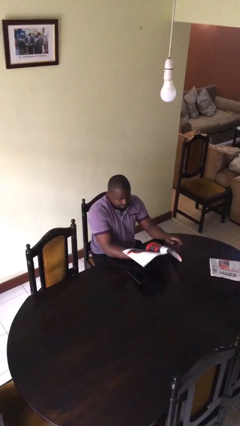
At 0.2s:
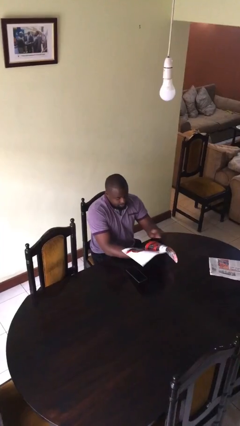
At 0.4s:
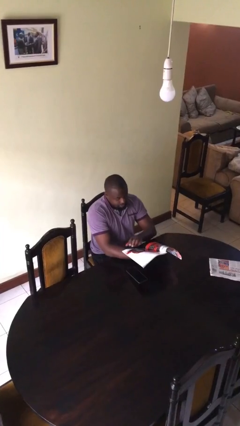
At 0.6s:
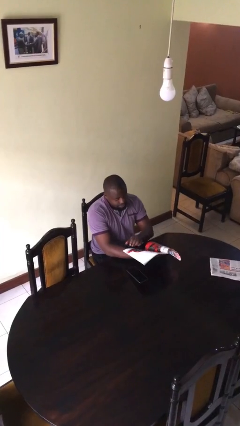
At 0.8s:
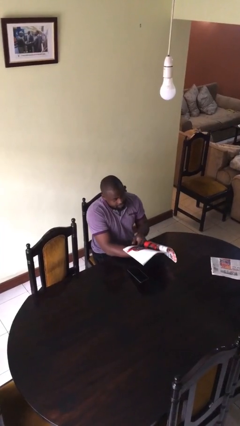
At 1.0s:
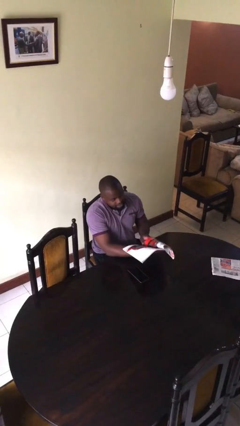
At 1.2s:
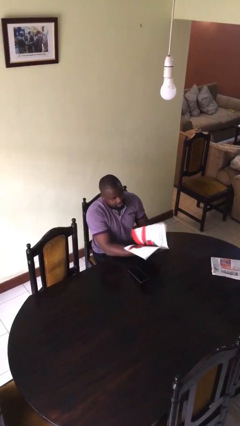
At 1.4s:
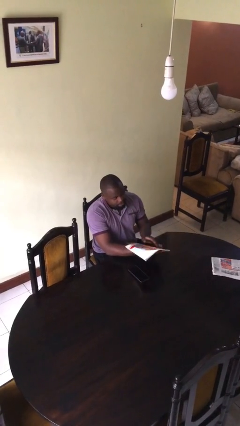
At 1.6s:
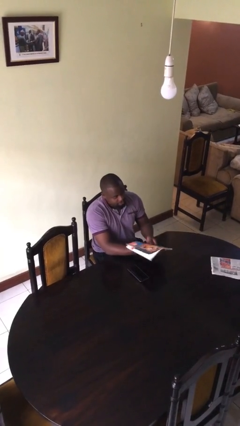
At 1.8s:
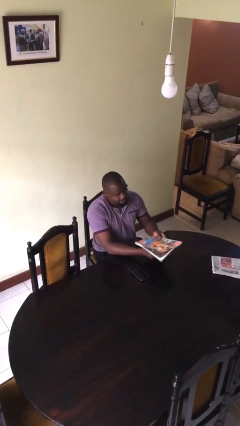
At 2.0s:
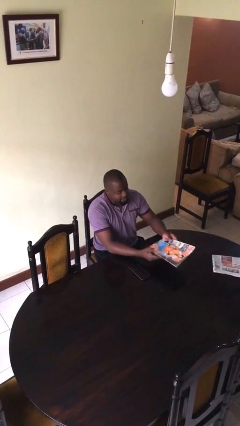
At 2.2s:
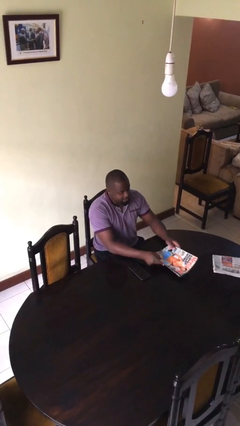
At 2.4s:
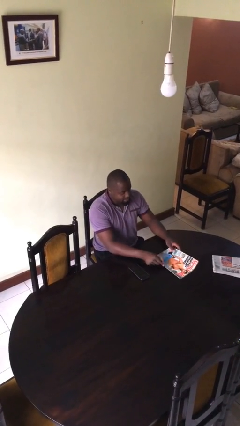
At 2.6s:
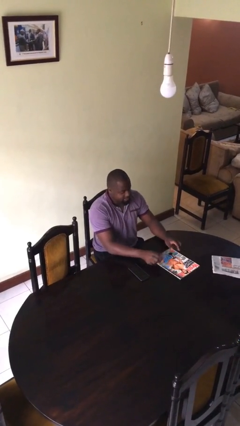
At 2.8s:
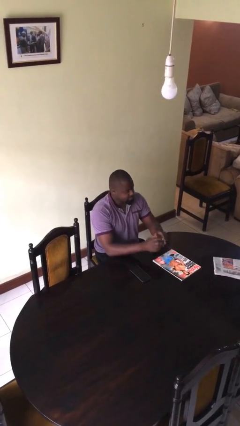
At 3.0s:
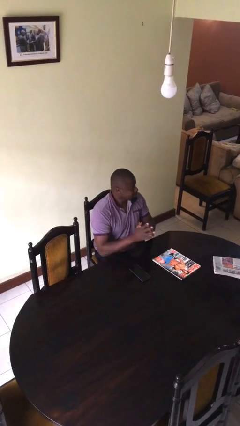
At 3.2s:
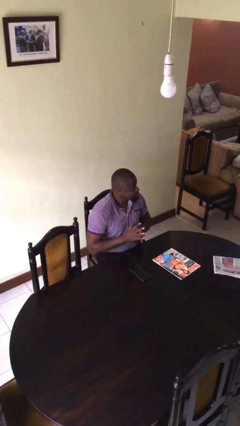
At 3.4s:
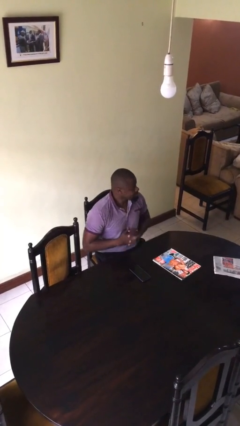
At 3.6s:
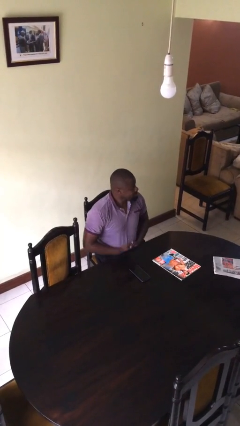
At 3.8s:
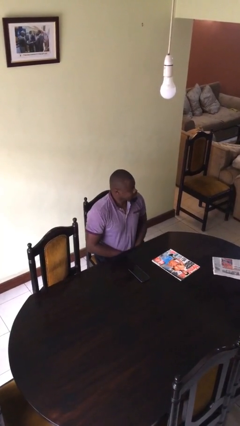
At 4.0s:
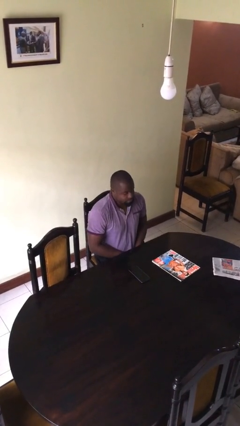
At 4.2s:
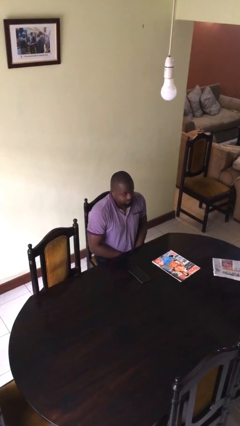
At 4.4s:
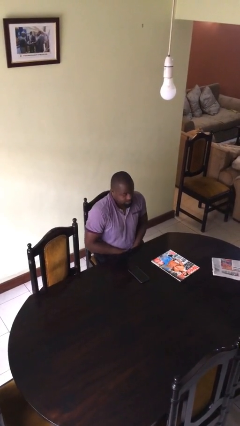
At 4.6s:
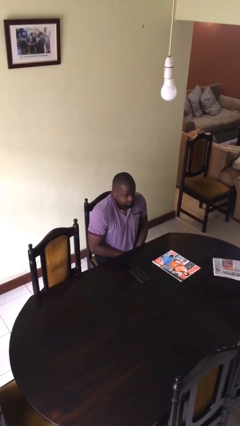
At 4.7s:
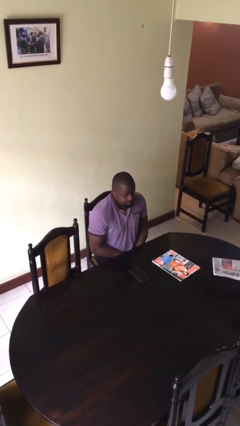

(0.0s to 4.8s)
person puts down object on table

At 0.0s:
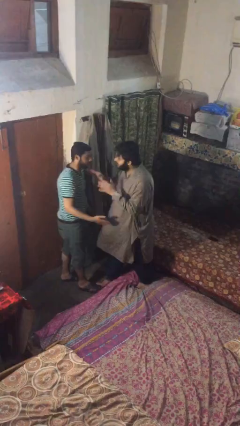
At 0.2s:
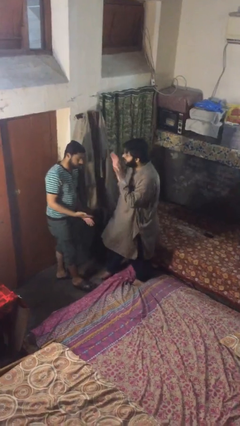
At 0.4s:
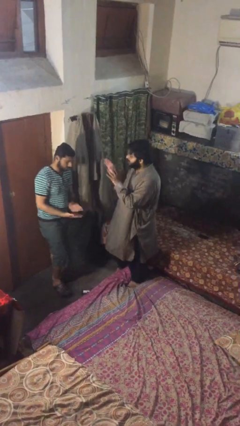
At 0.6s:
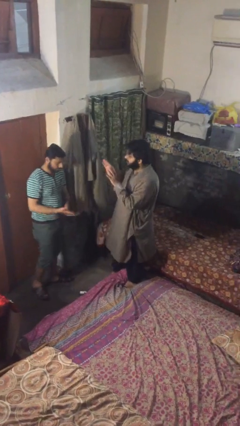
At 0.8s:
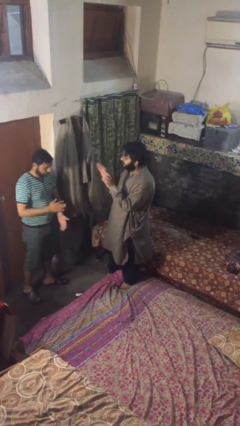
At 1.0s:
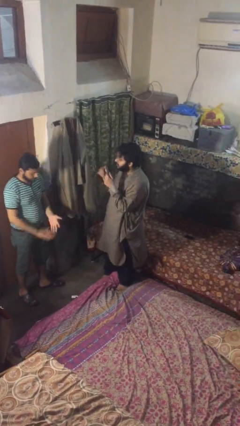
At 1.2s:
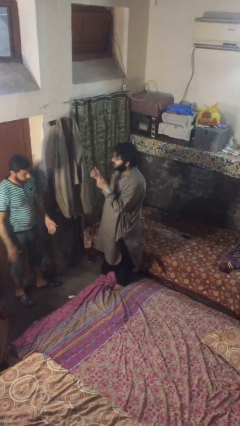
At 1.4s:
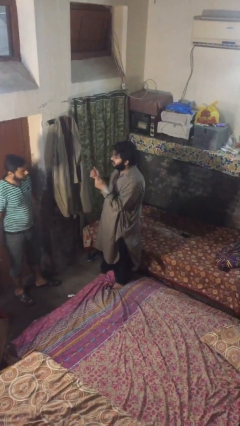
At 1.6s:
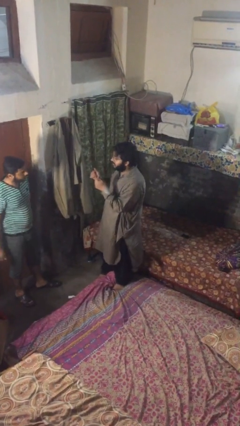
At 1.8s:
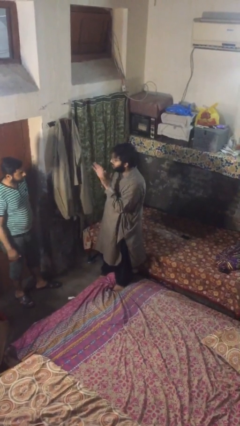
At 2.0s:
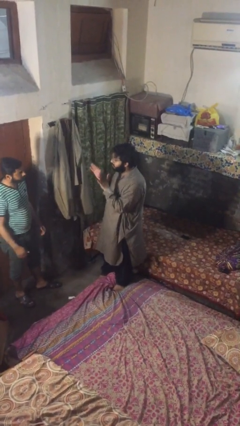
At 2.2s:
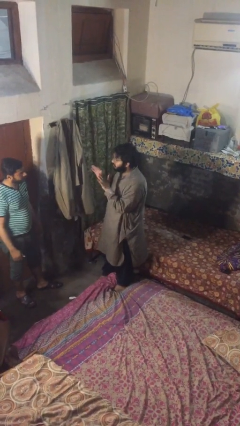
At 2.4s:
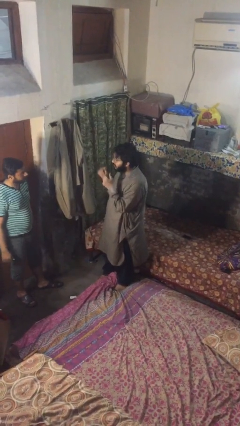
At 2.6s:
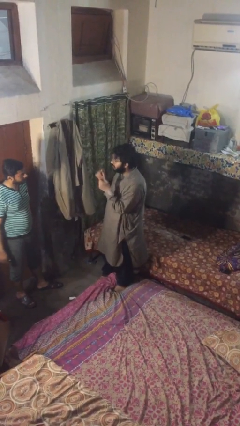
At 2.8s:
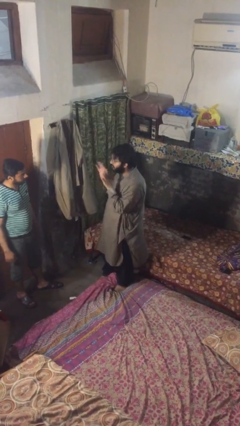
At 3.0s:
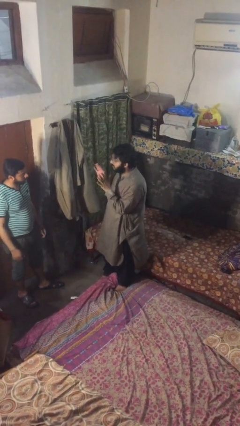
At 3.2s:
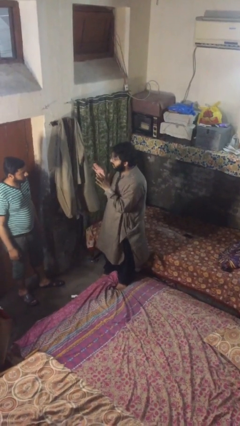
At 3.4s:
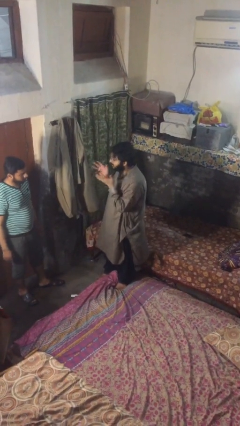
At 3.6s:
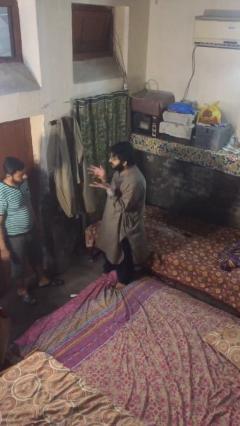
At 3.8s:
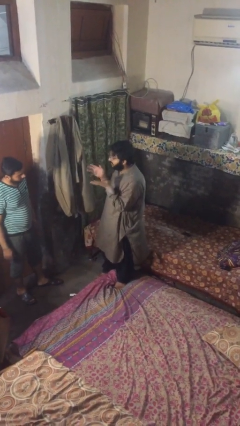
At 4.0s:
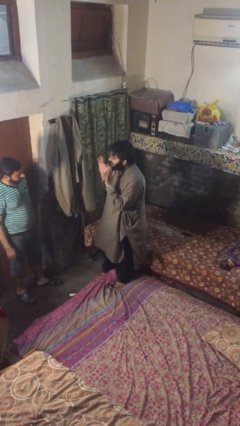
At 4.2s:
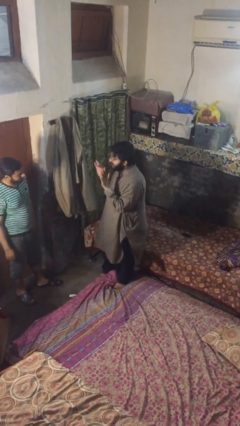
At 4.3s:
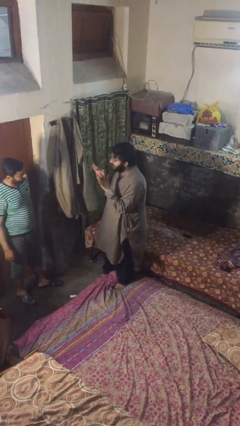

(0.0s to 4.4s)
person talks to person

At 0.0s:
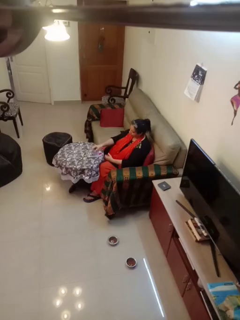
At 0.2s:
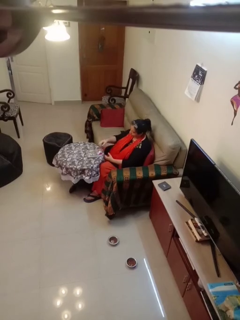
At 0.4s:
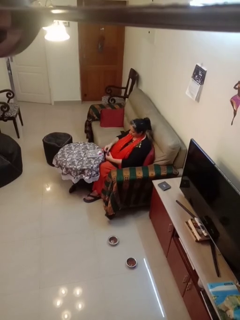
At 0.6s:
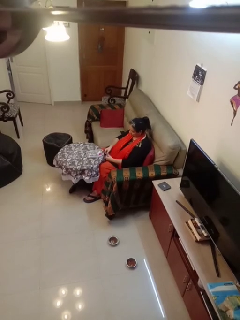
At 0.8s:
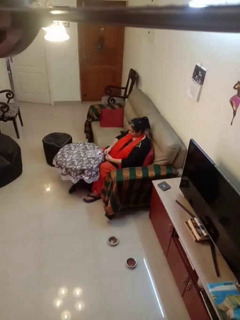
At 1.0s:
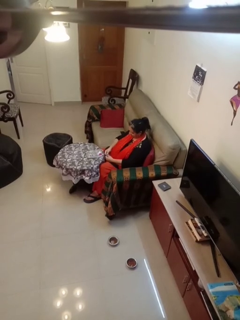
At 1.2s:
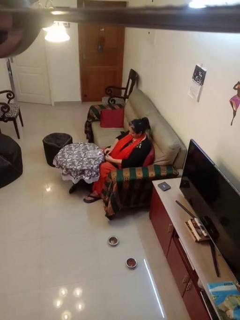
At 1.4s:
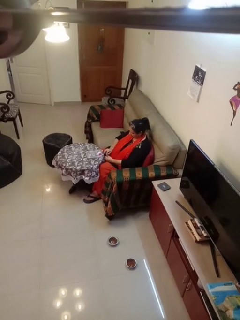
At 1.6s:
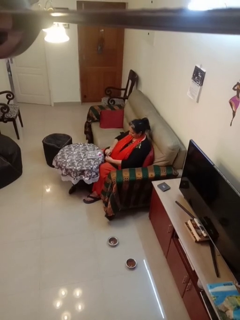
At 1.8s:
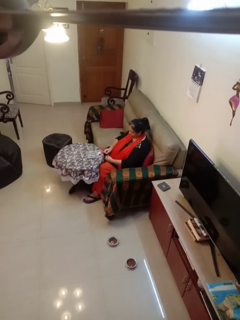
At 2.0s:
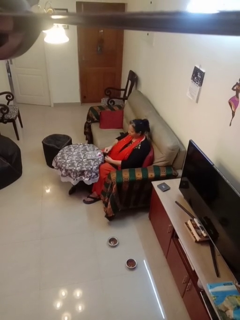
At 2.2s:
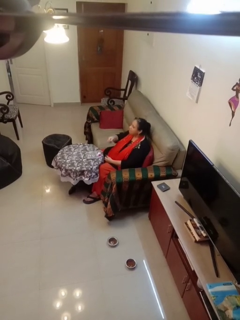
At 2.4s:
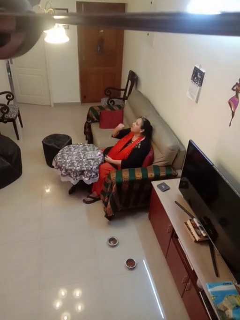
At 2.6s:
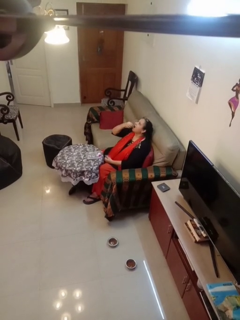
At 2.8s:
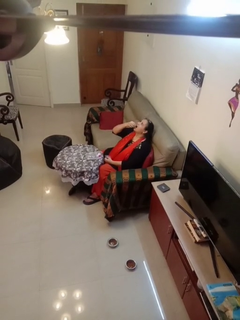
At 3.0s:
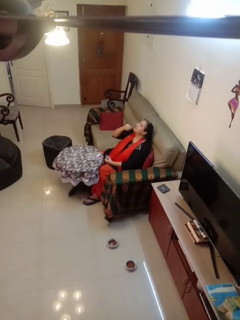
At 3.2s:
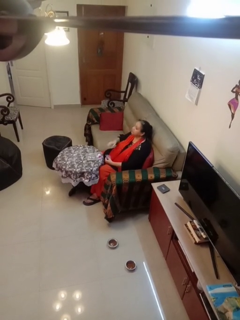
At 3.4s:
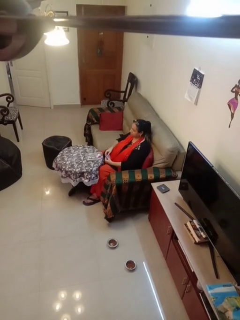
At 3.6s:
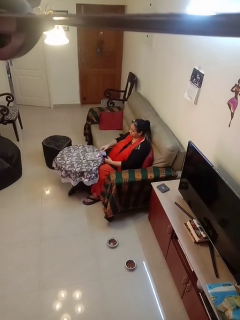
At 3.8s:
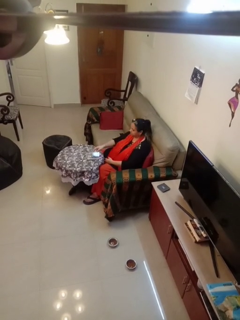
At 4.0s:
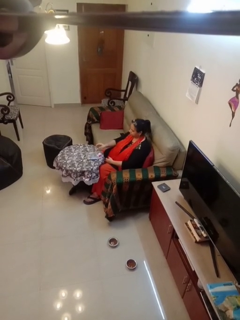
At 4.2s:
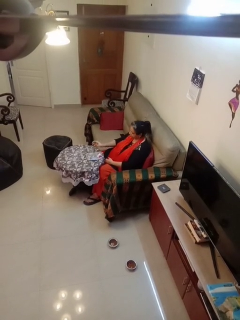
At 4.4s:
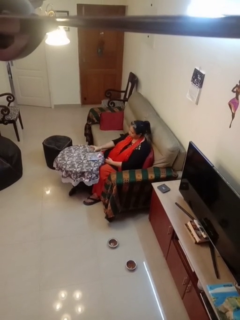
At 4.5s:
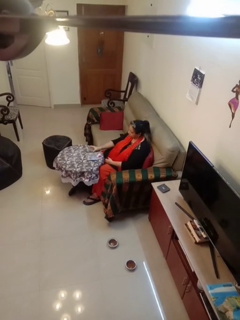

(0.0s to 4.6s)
person takes medicine pills

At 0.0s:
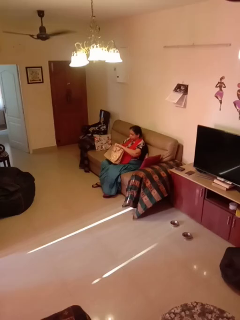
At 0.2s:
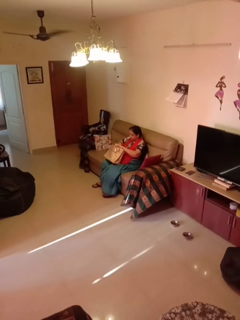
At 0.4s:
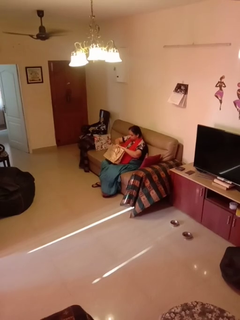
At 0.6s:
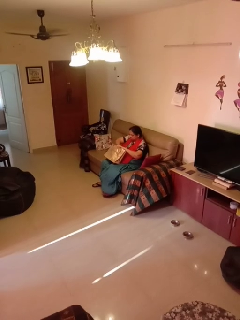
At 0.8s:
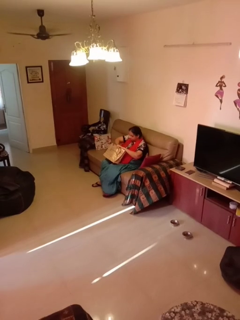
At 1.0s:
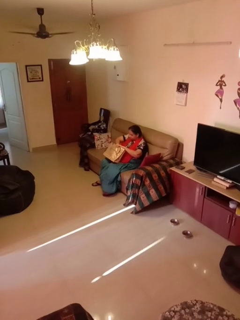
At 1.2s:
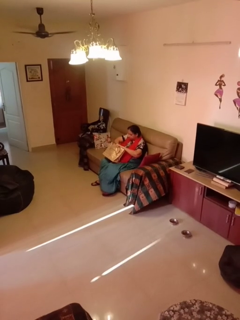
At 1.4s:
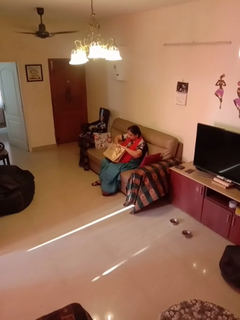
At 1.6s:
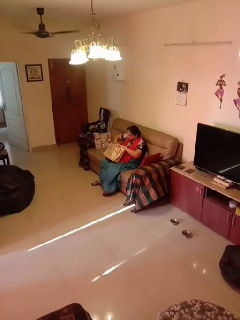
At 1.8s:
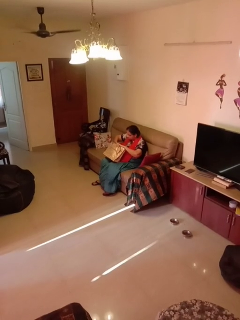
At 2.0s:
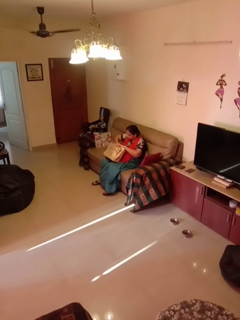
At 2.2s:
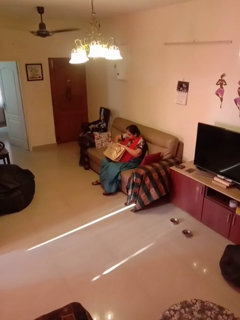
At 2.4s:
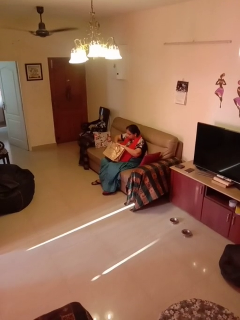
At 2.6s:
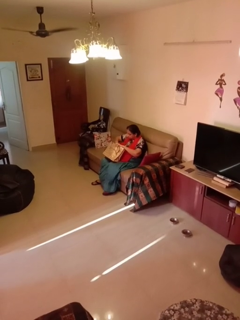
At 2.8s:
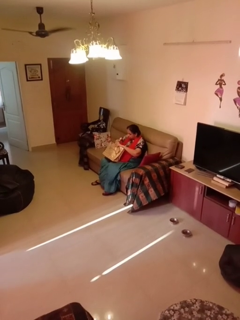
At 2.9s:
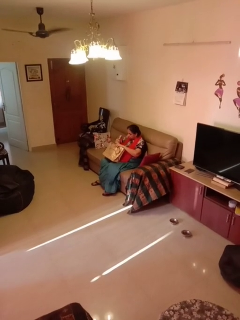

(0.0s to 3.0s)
person searches in purse

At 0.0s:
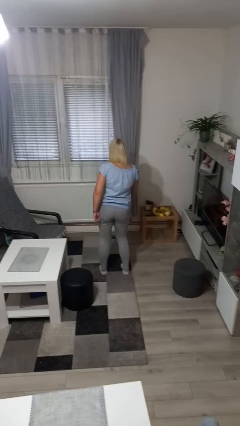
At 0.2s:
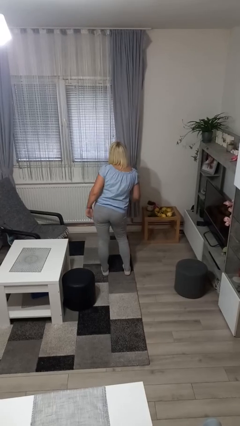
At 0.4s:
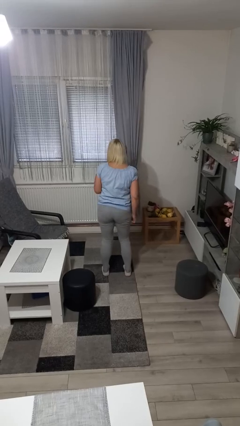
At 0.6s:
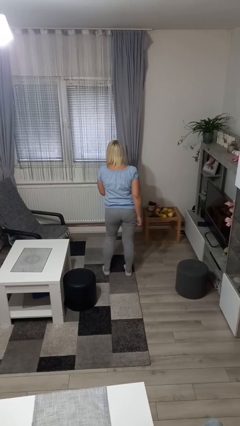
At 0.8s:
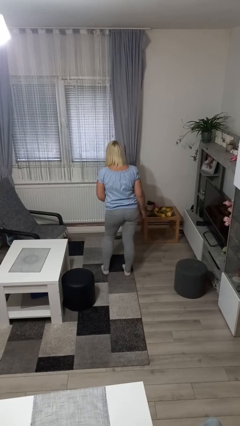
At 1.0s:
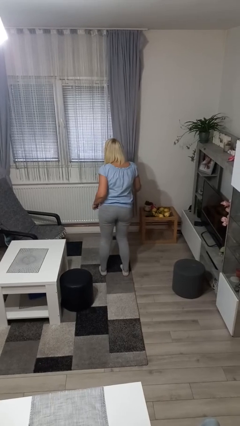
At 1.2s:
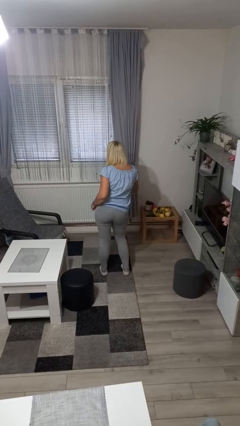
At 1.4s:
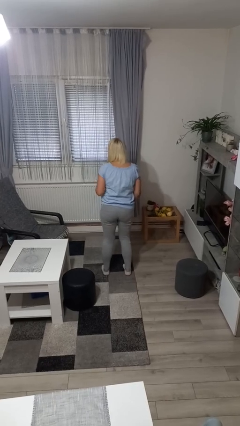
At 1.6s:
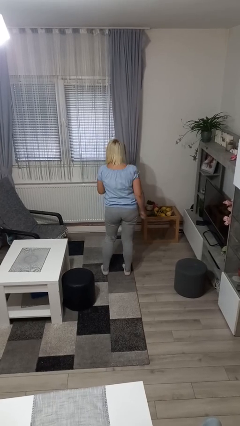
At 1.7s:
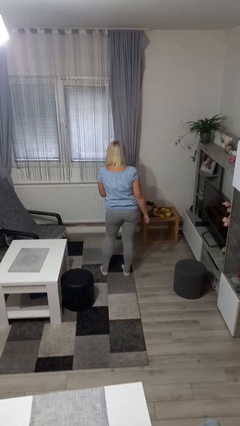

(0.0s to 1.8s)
person dances in place

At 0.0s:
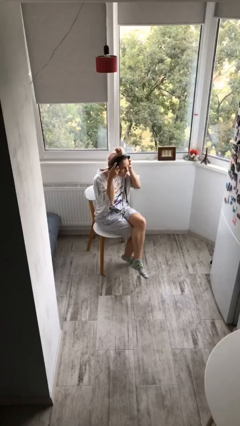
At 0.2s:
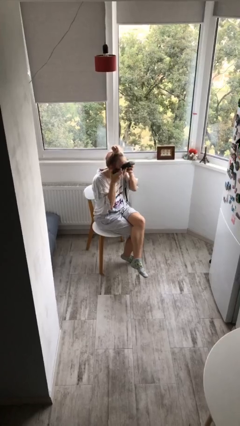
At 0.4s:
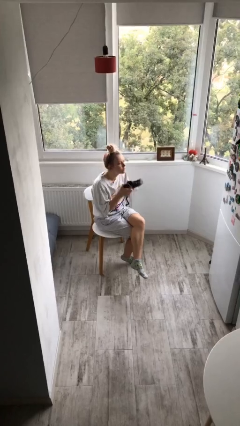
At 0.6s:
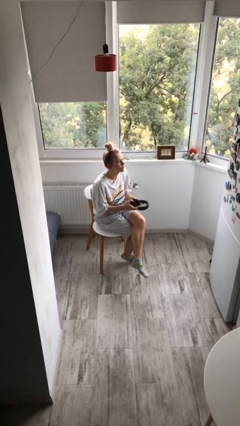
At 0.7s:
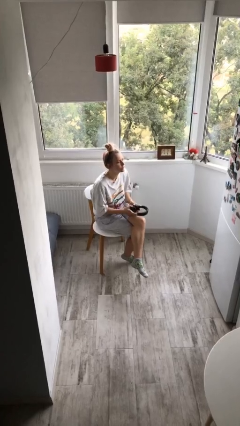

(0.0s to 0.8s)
person takes off headphones
